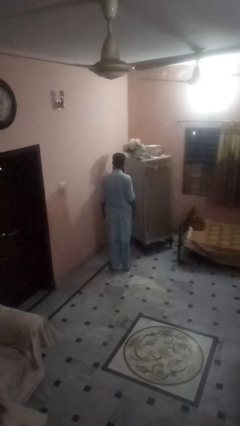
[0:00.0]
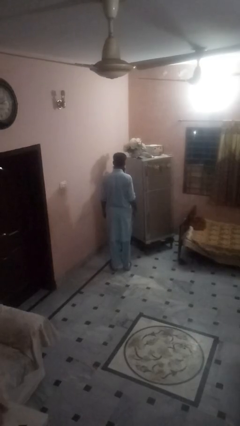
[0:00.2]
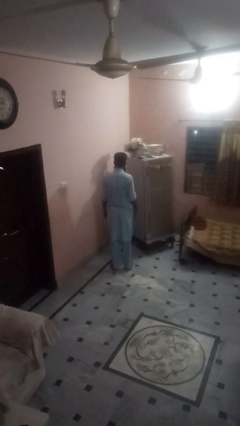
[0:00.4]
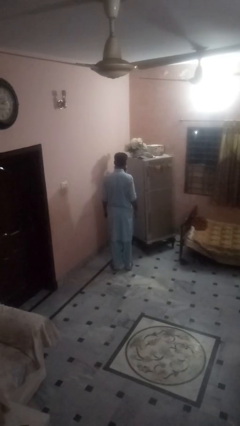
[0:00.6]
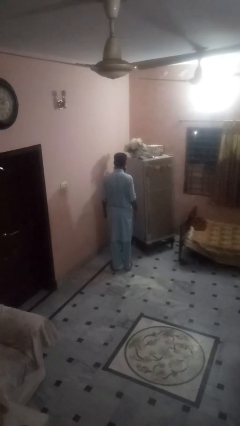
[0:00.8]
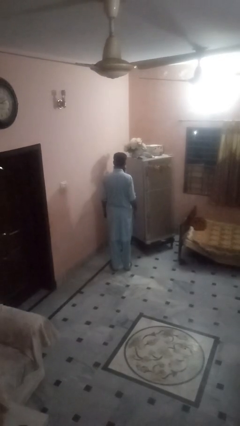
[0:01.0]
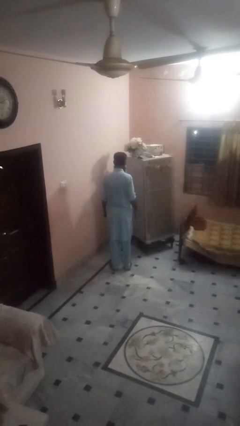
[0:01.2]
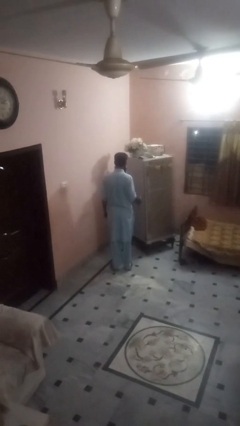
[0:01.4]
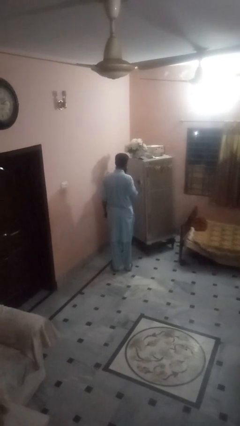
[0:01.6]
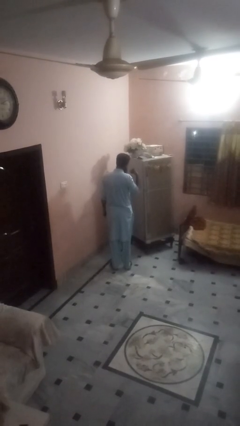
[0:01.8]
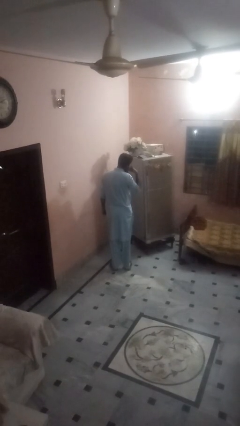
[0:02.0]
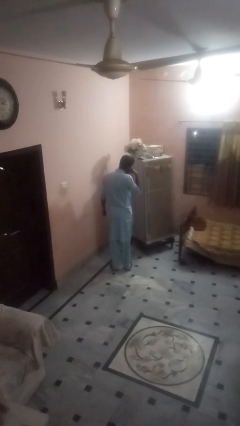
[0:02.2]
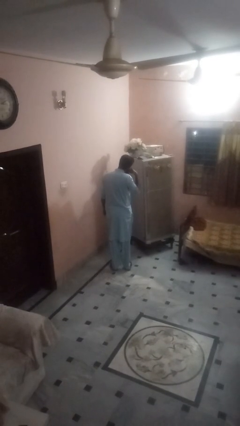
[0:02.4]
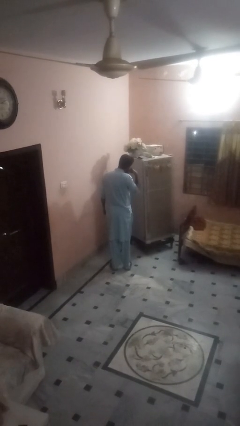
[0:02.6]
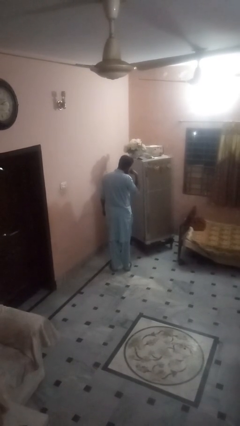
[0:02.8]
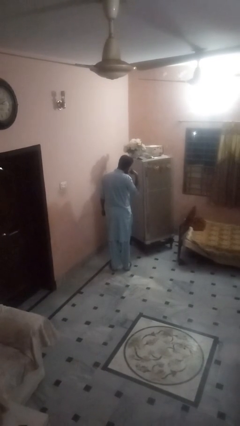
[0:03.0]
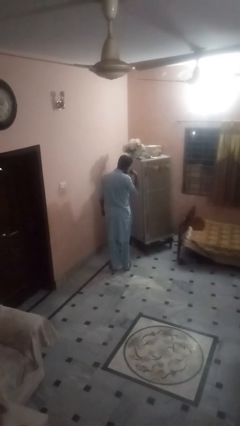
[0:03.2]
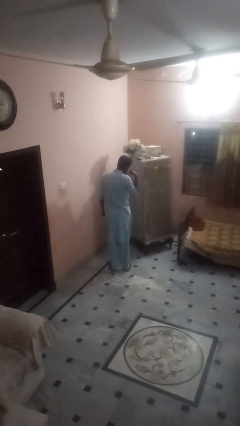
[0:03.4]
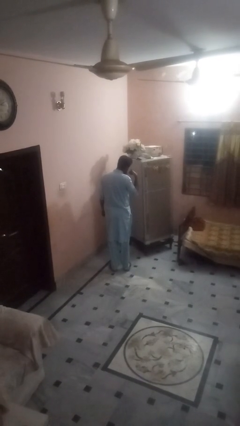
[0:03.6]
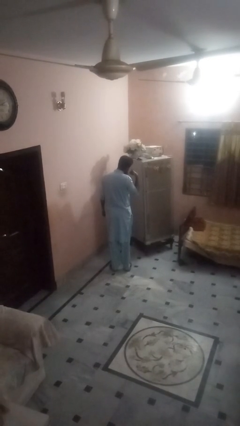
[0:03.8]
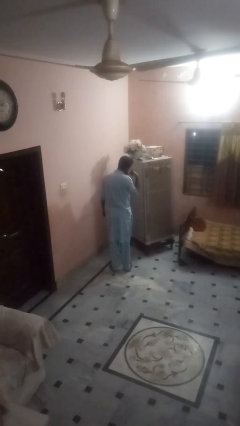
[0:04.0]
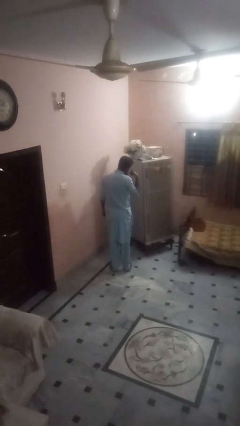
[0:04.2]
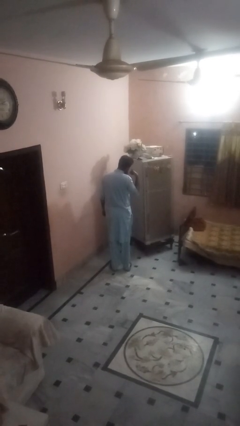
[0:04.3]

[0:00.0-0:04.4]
person gestures call me

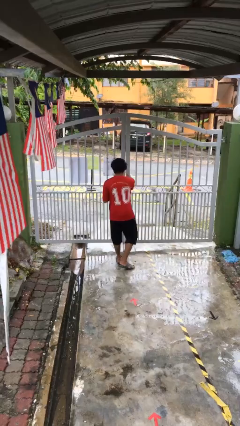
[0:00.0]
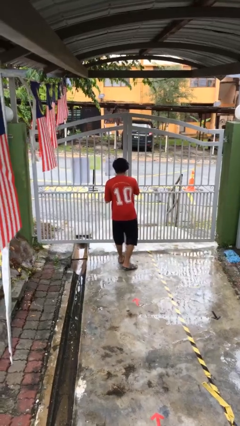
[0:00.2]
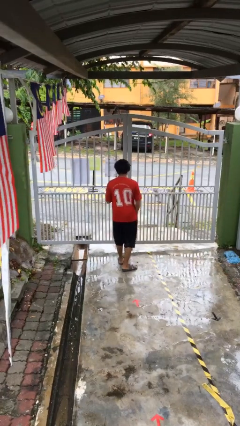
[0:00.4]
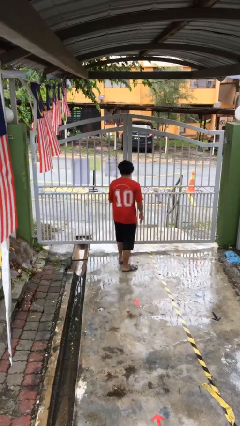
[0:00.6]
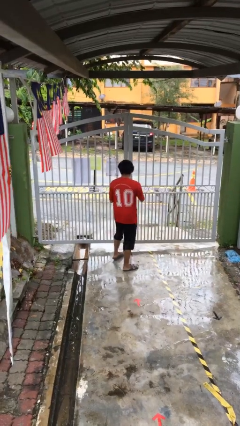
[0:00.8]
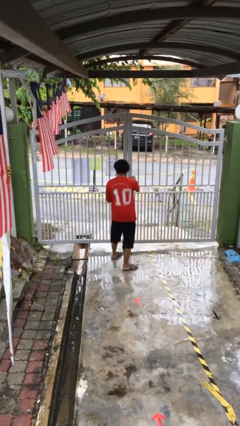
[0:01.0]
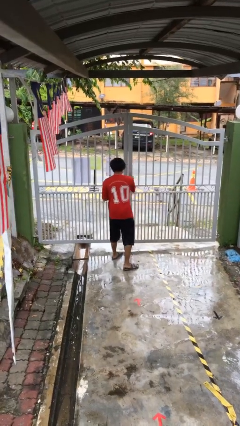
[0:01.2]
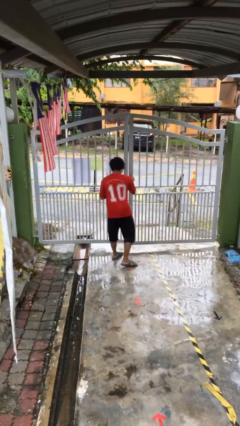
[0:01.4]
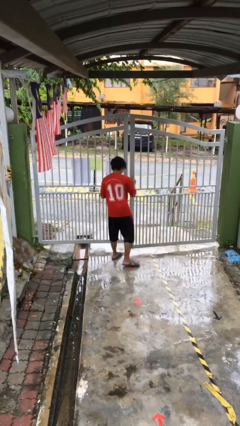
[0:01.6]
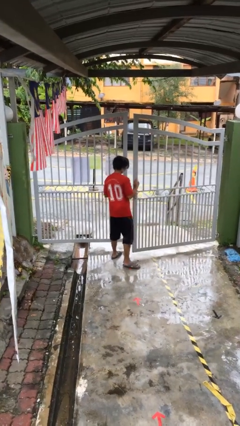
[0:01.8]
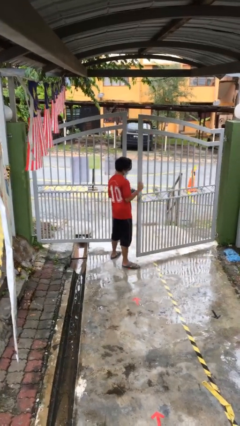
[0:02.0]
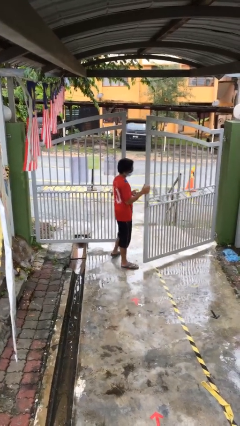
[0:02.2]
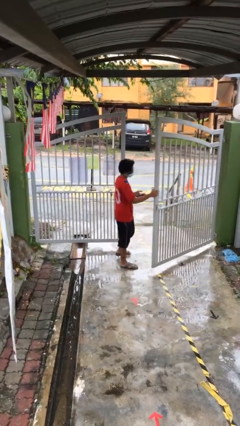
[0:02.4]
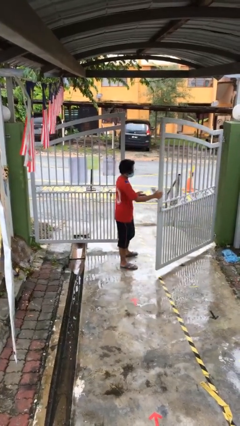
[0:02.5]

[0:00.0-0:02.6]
person opens facility door

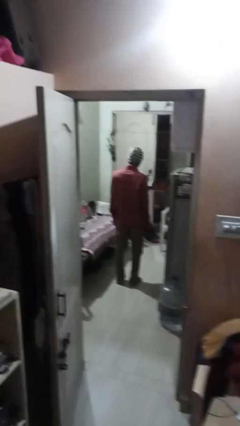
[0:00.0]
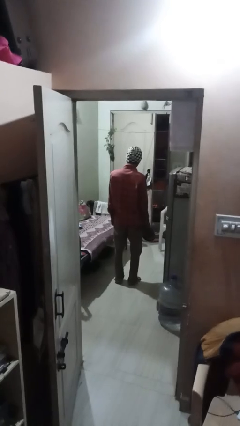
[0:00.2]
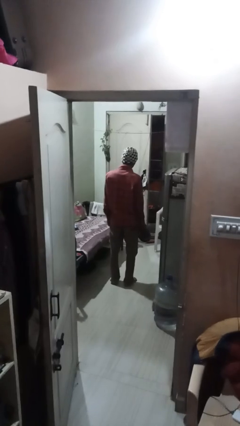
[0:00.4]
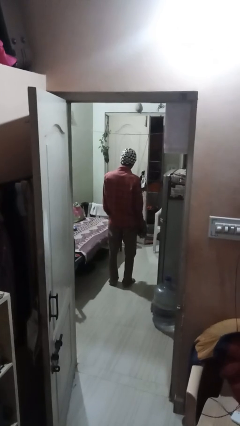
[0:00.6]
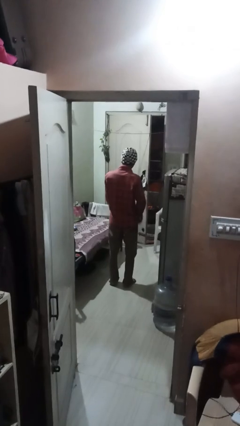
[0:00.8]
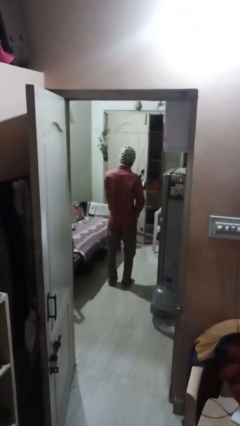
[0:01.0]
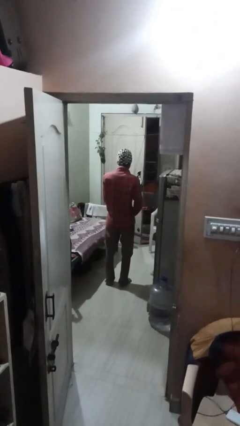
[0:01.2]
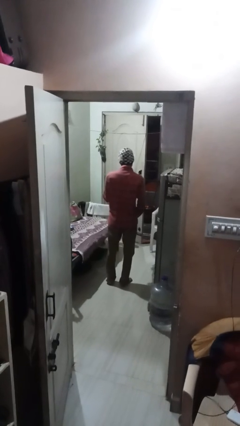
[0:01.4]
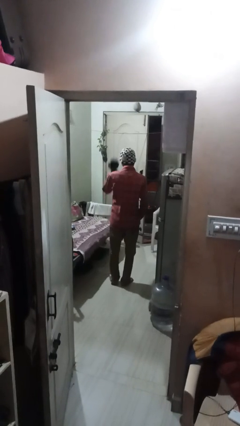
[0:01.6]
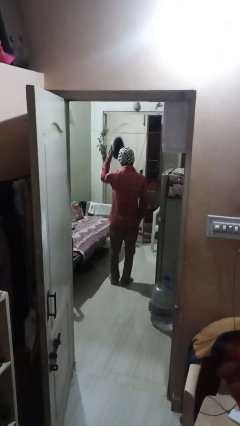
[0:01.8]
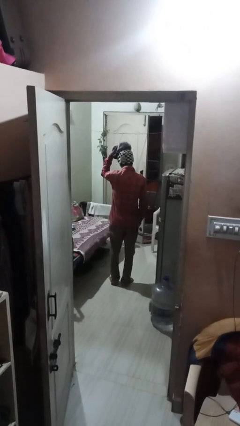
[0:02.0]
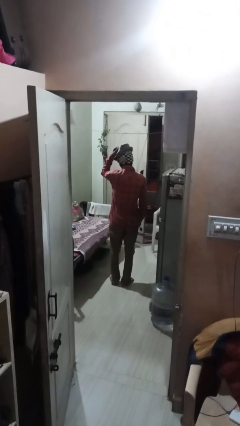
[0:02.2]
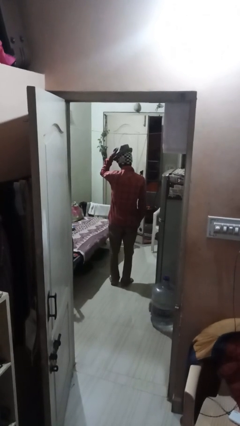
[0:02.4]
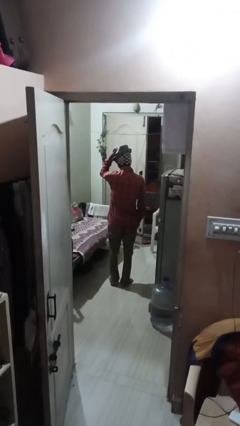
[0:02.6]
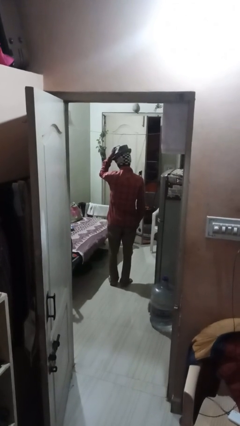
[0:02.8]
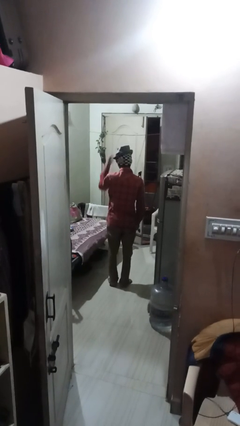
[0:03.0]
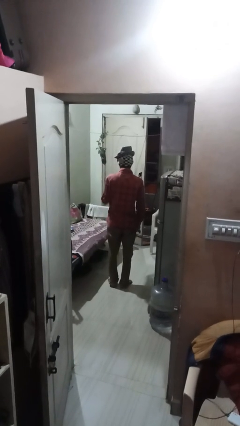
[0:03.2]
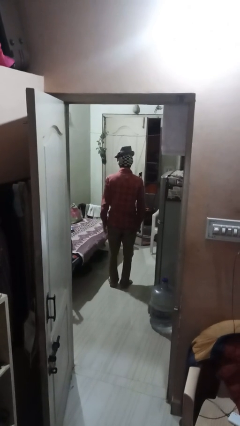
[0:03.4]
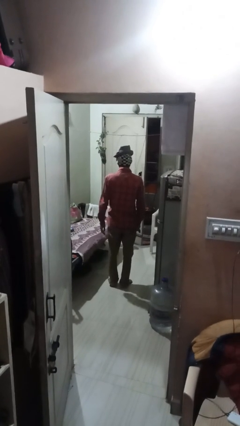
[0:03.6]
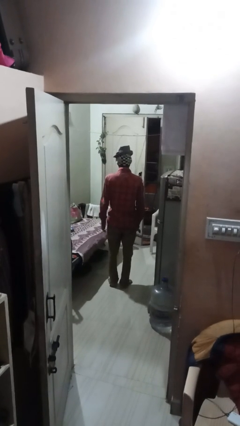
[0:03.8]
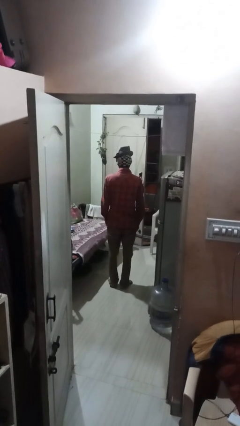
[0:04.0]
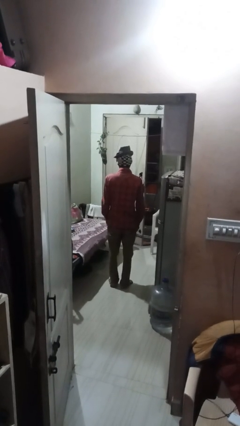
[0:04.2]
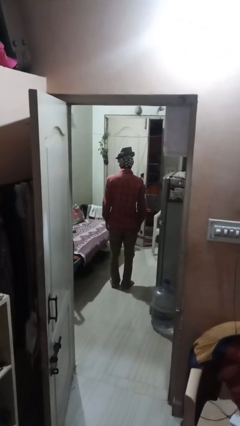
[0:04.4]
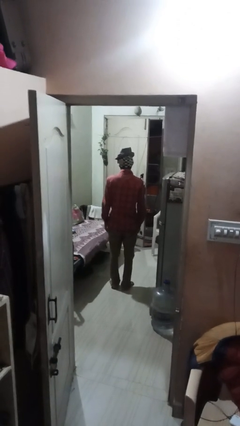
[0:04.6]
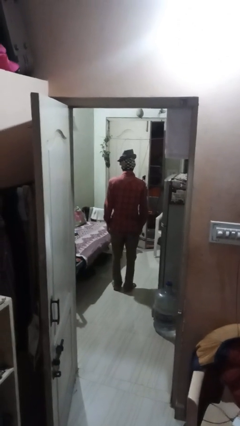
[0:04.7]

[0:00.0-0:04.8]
person puts on hat

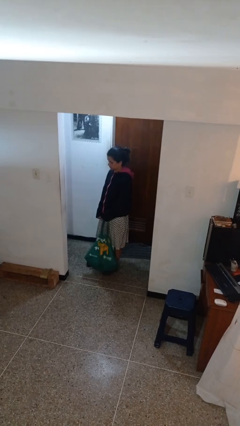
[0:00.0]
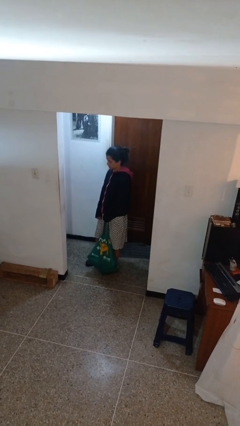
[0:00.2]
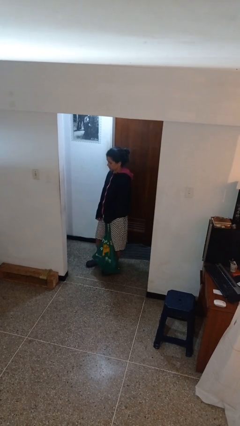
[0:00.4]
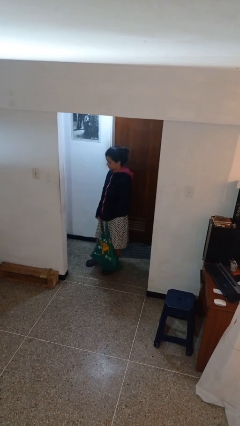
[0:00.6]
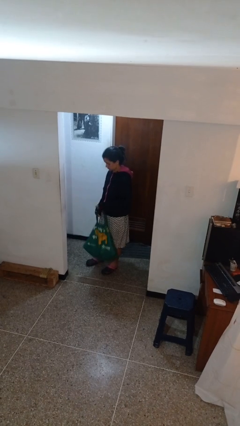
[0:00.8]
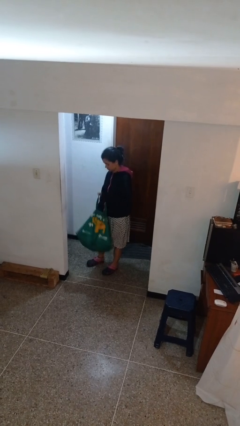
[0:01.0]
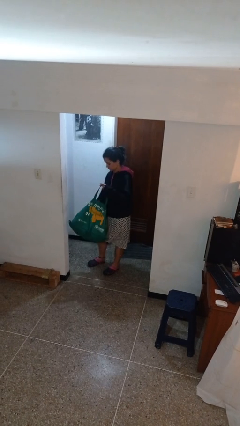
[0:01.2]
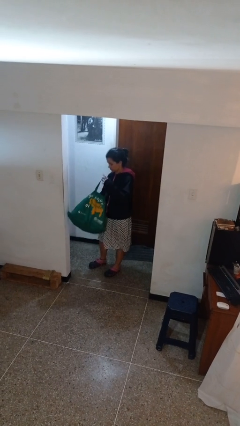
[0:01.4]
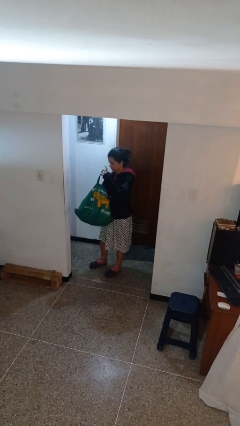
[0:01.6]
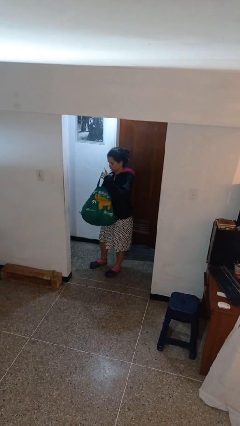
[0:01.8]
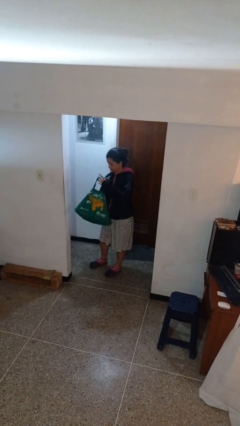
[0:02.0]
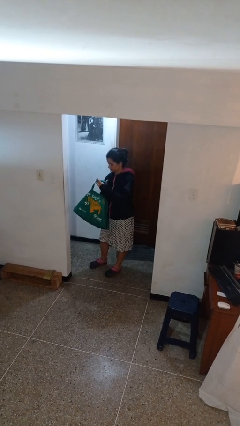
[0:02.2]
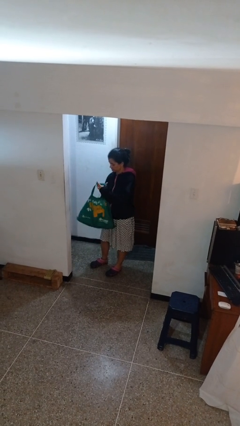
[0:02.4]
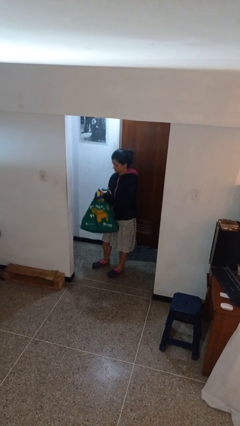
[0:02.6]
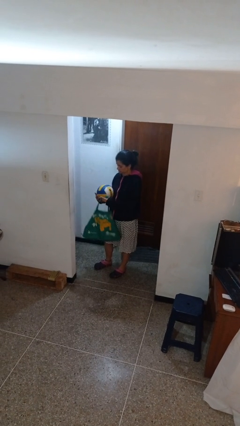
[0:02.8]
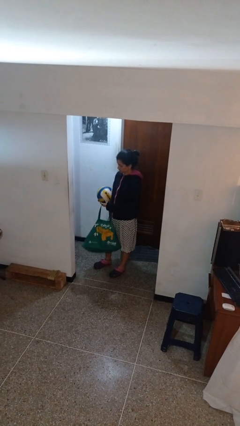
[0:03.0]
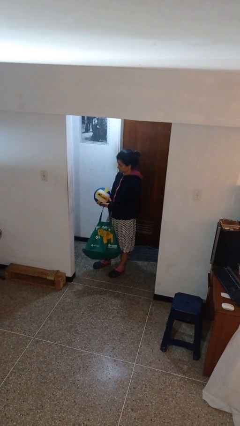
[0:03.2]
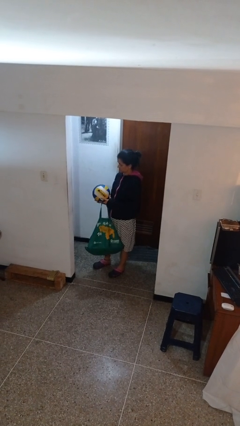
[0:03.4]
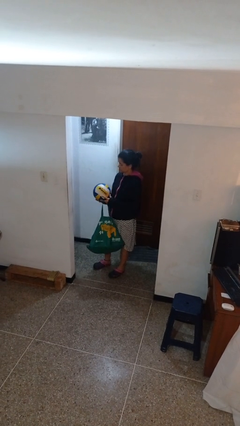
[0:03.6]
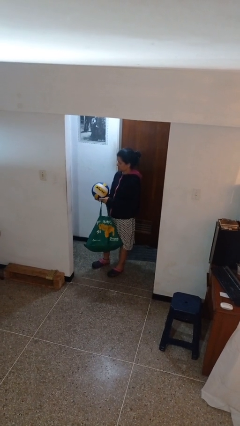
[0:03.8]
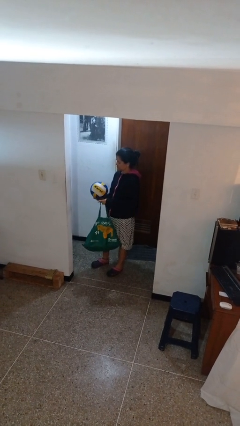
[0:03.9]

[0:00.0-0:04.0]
person takes object from bag

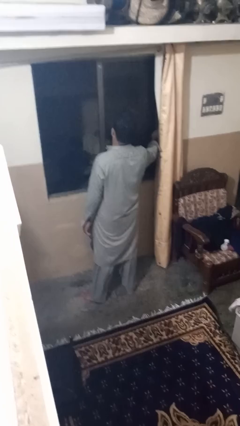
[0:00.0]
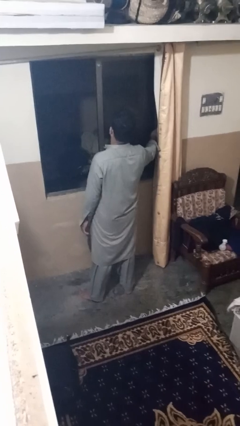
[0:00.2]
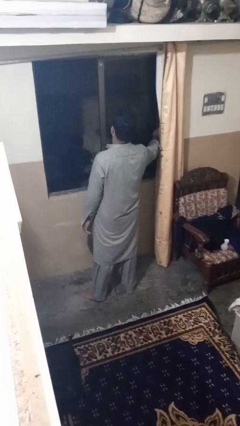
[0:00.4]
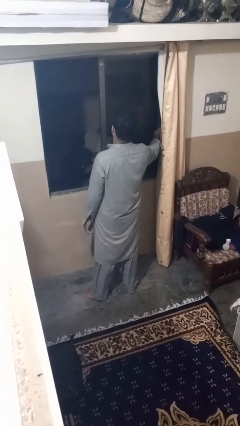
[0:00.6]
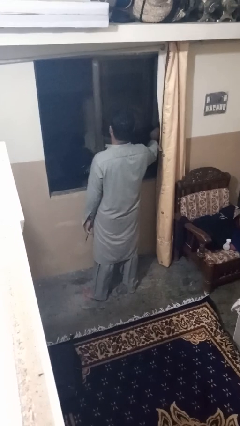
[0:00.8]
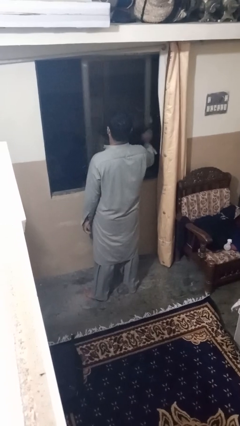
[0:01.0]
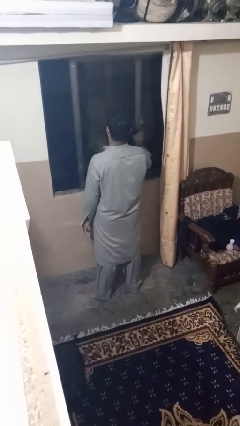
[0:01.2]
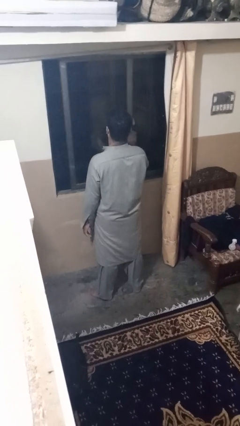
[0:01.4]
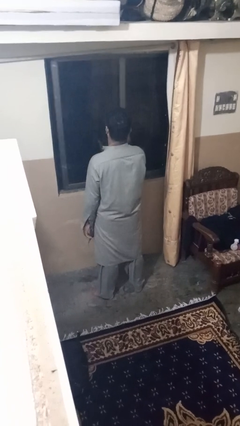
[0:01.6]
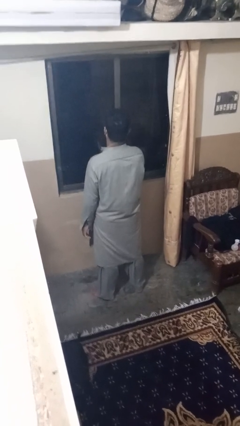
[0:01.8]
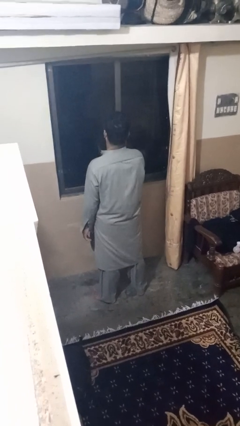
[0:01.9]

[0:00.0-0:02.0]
person closes home window
